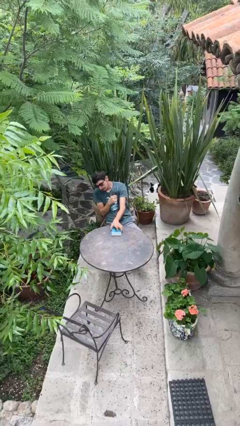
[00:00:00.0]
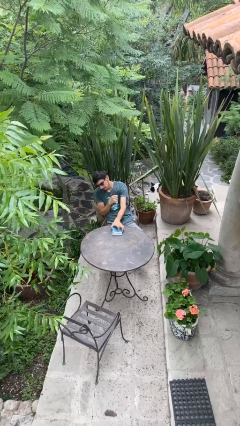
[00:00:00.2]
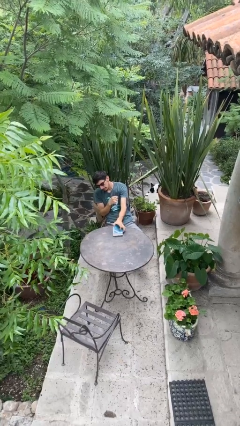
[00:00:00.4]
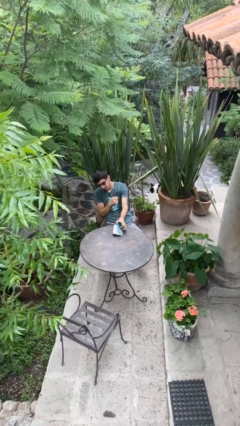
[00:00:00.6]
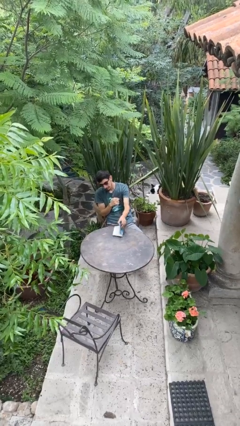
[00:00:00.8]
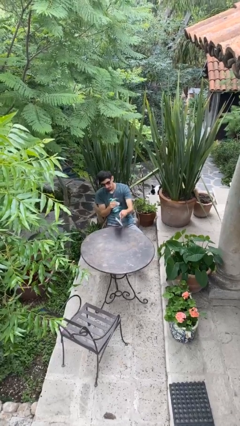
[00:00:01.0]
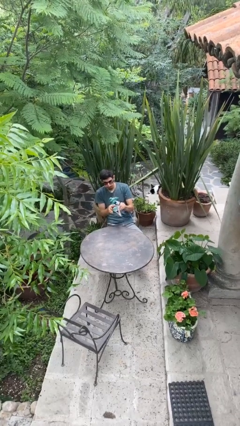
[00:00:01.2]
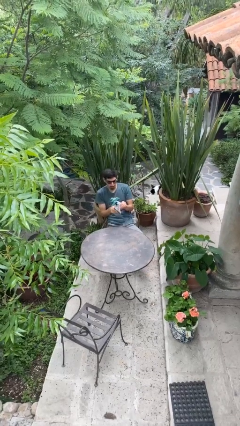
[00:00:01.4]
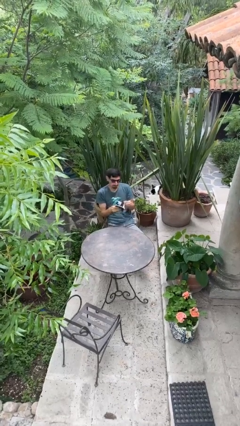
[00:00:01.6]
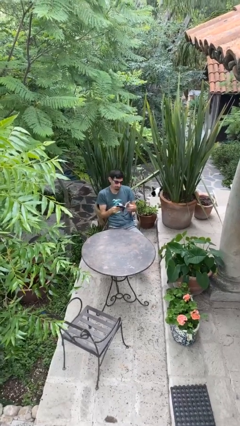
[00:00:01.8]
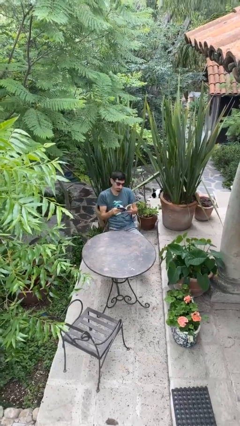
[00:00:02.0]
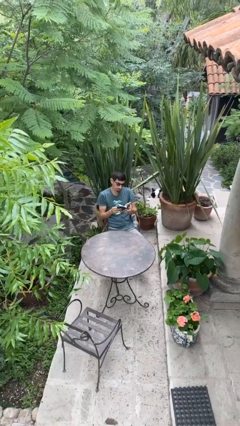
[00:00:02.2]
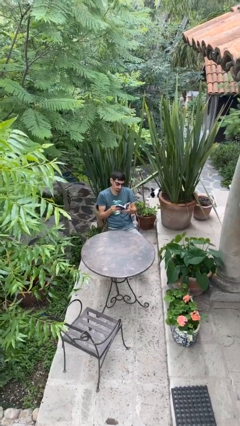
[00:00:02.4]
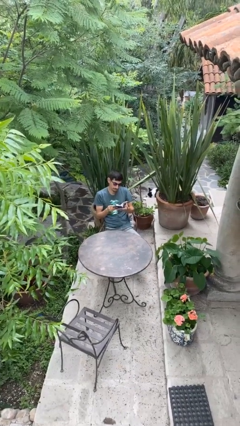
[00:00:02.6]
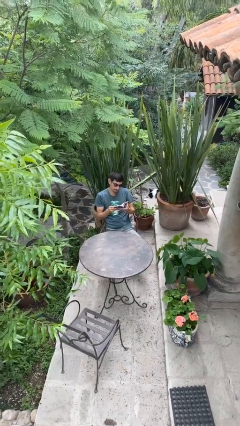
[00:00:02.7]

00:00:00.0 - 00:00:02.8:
person picks up object from table

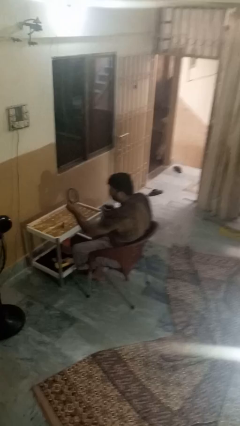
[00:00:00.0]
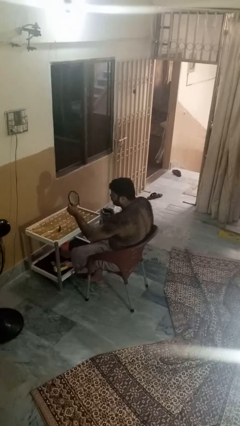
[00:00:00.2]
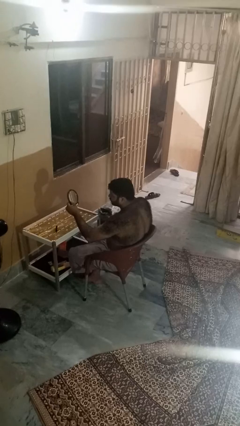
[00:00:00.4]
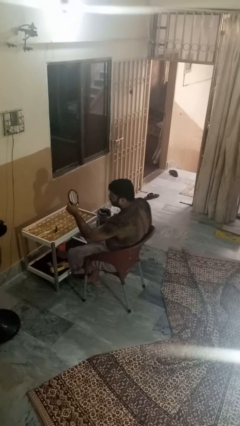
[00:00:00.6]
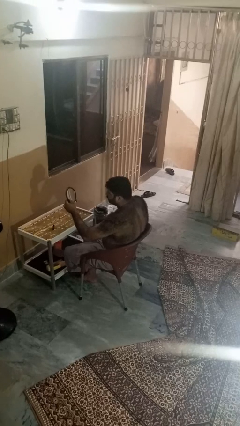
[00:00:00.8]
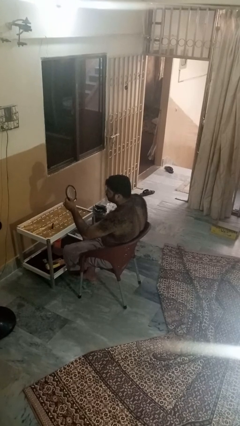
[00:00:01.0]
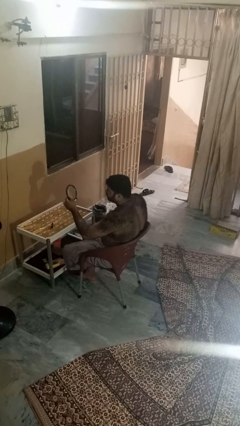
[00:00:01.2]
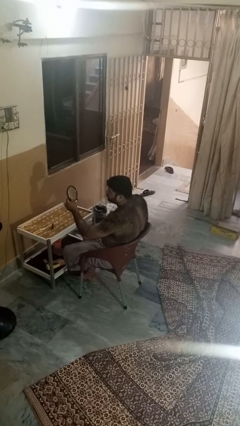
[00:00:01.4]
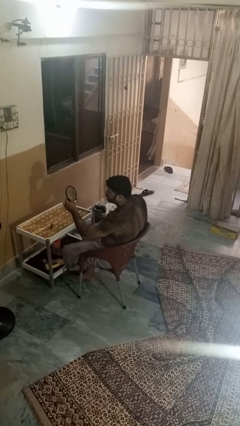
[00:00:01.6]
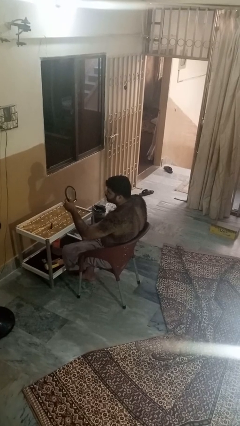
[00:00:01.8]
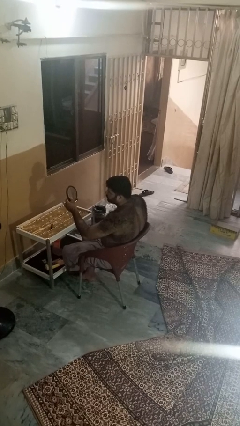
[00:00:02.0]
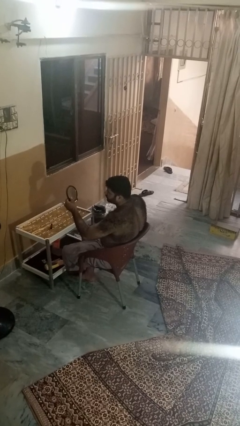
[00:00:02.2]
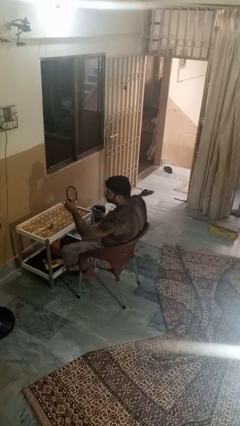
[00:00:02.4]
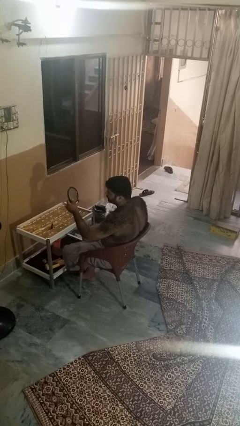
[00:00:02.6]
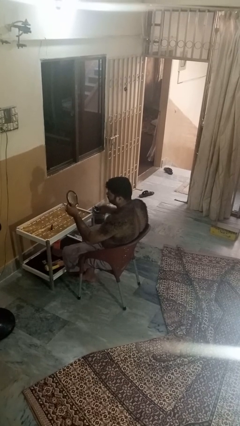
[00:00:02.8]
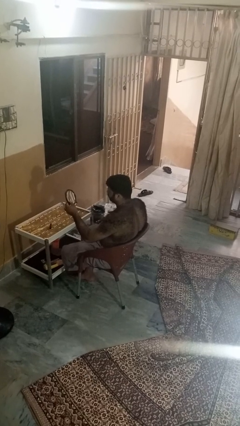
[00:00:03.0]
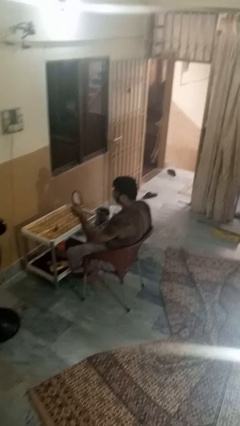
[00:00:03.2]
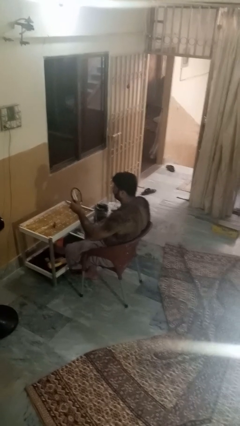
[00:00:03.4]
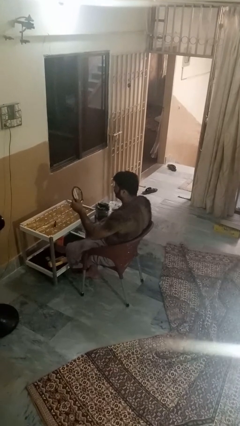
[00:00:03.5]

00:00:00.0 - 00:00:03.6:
person applies eye makeup

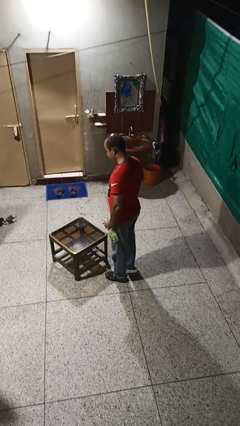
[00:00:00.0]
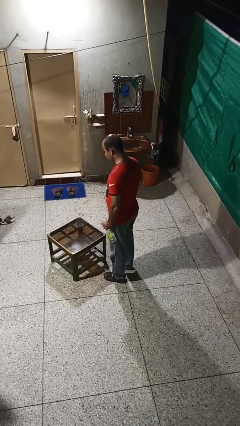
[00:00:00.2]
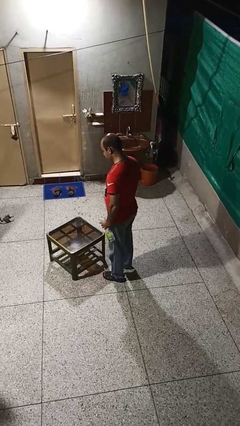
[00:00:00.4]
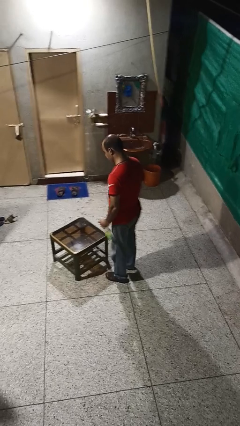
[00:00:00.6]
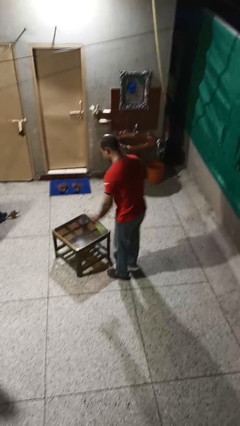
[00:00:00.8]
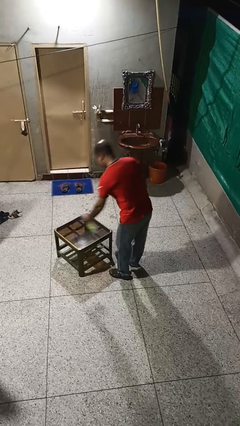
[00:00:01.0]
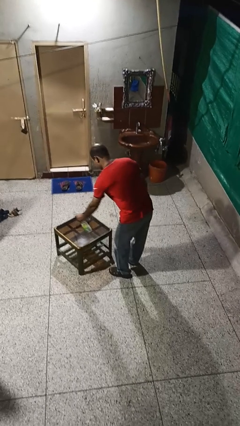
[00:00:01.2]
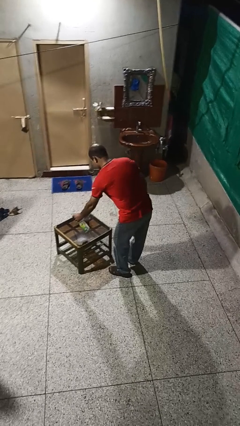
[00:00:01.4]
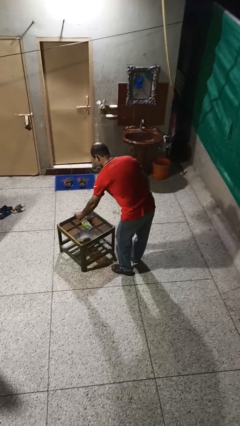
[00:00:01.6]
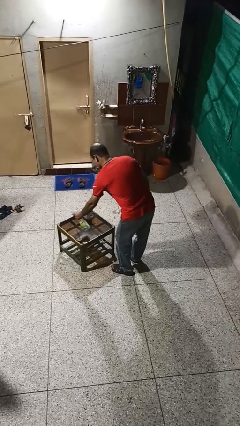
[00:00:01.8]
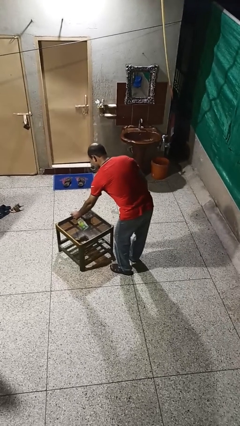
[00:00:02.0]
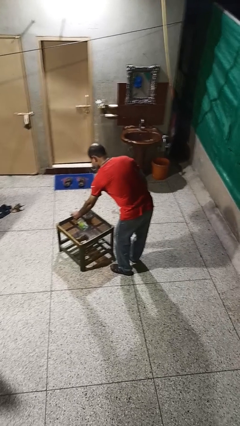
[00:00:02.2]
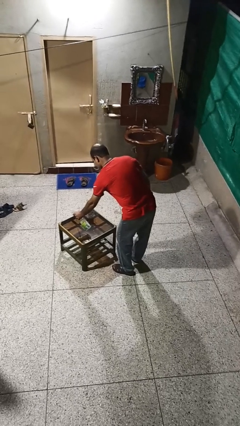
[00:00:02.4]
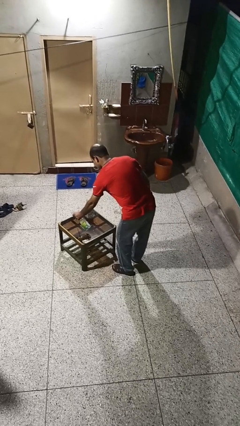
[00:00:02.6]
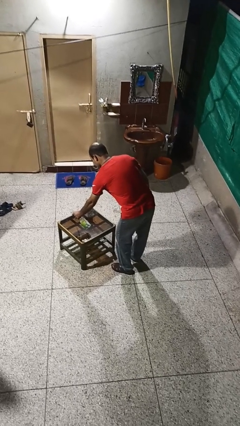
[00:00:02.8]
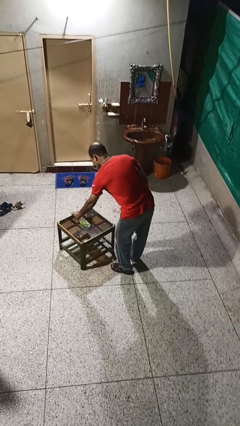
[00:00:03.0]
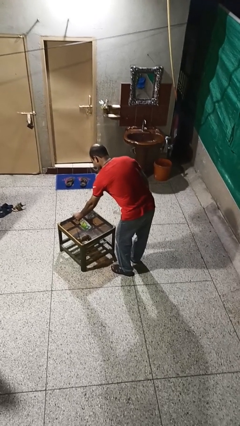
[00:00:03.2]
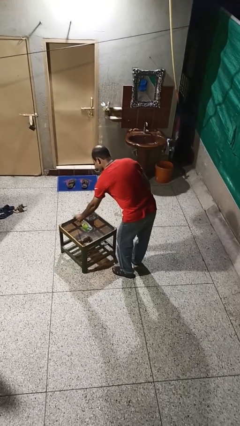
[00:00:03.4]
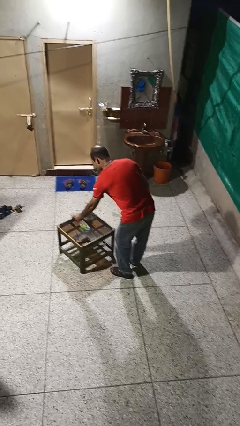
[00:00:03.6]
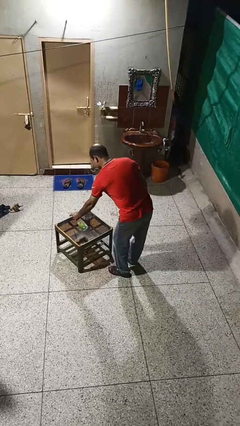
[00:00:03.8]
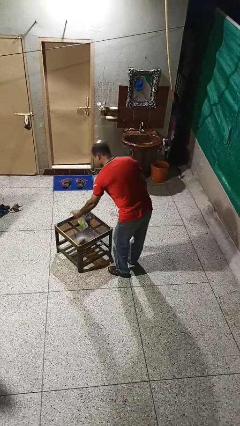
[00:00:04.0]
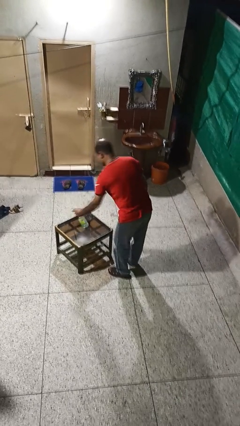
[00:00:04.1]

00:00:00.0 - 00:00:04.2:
person sprays from bottle

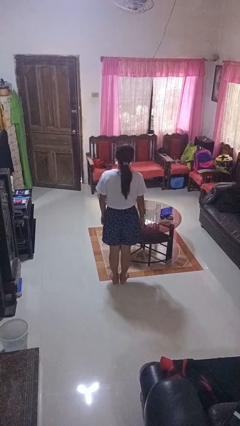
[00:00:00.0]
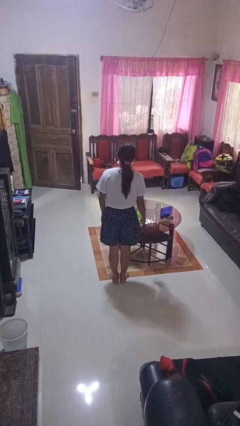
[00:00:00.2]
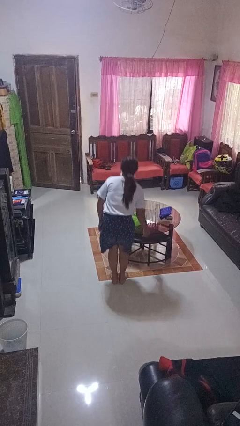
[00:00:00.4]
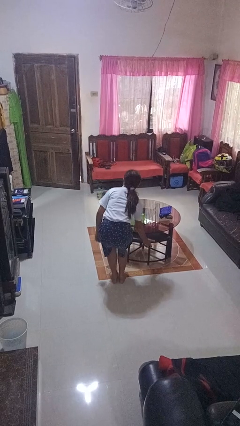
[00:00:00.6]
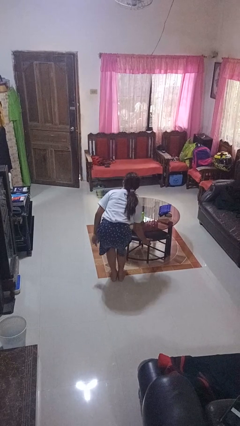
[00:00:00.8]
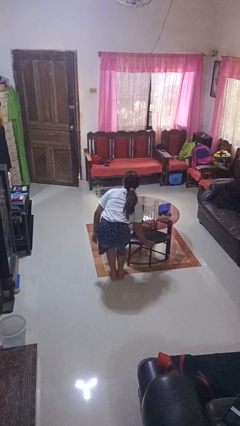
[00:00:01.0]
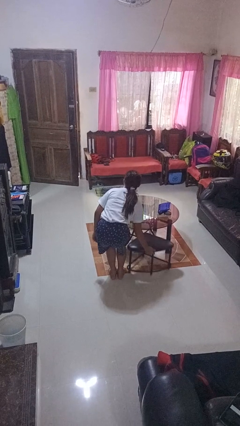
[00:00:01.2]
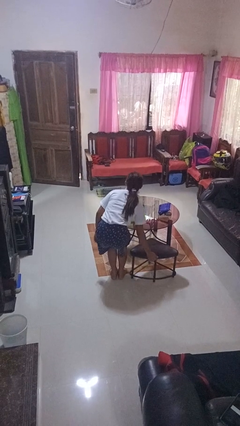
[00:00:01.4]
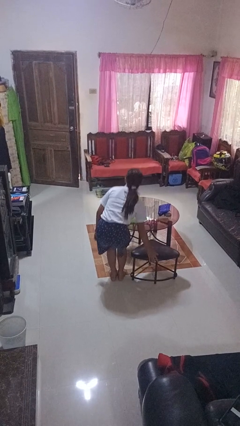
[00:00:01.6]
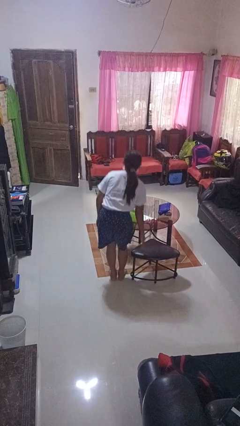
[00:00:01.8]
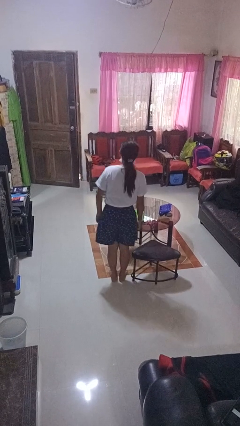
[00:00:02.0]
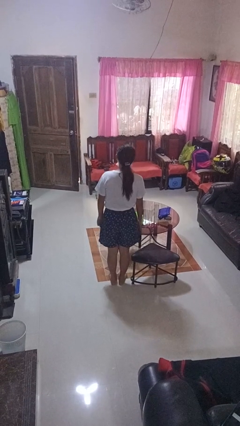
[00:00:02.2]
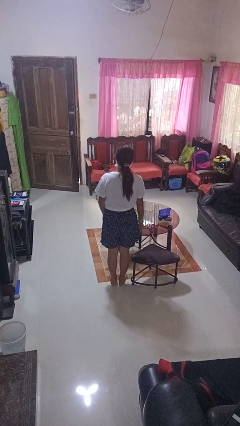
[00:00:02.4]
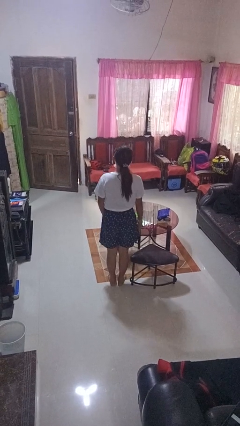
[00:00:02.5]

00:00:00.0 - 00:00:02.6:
person pulls out chair

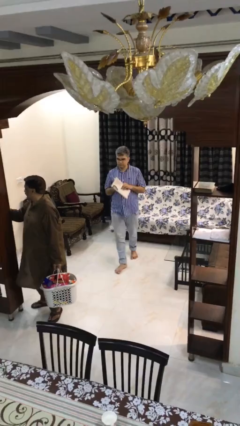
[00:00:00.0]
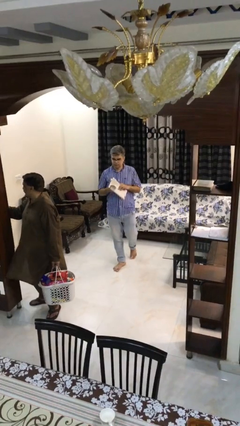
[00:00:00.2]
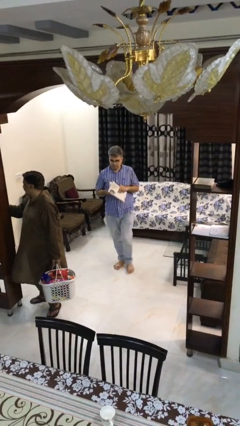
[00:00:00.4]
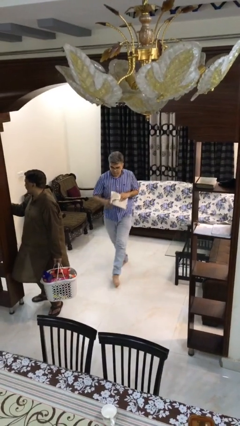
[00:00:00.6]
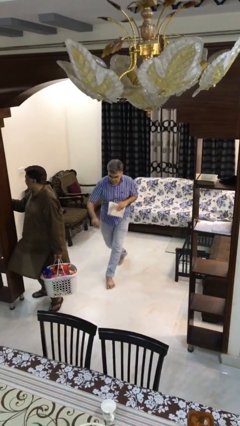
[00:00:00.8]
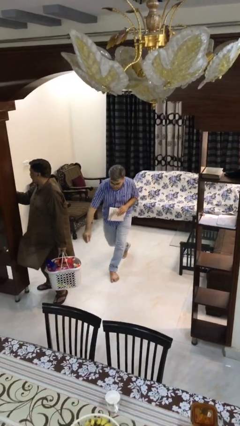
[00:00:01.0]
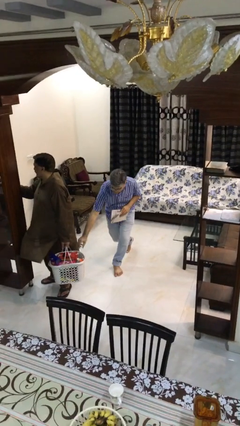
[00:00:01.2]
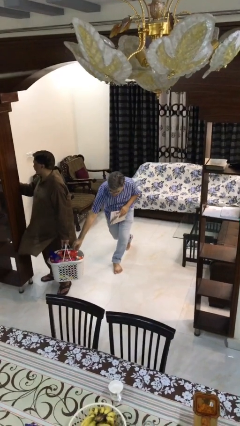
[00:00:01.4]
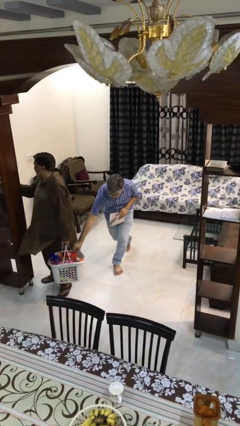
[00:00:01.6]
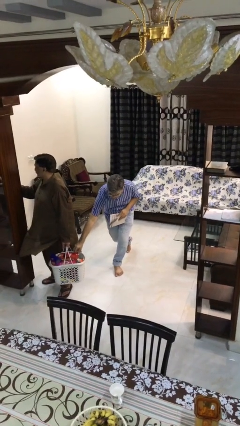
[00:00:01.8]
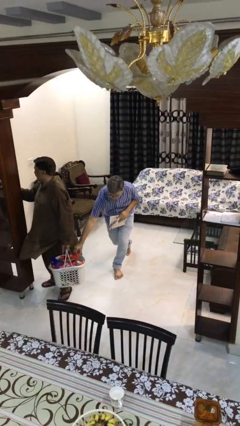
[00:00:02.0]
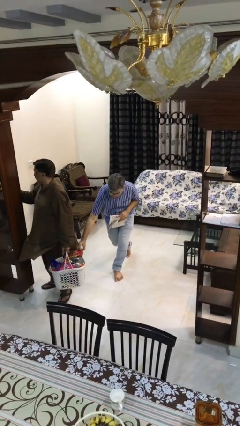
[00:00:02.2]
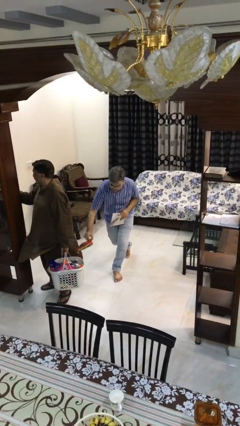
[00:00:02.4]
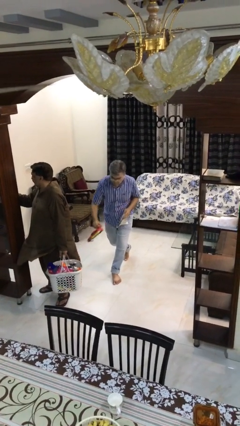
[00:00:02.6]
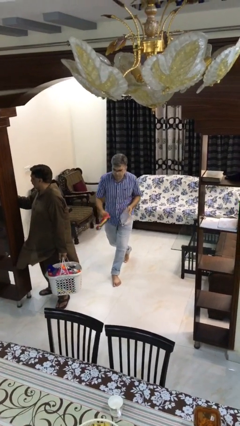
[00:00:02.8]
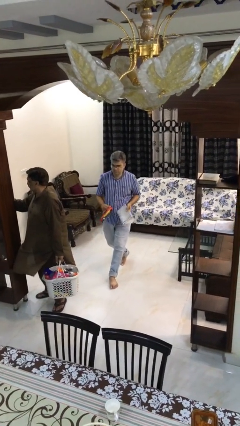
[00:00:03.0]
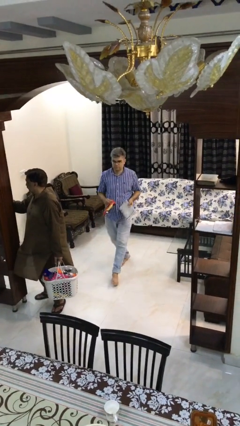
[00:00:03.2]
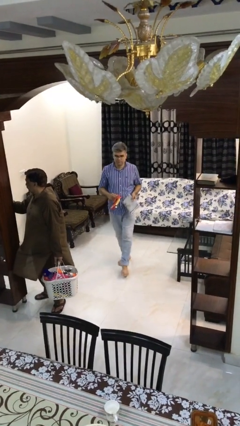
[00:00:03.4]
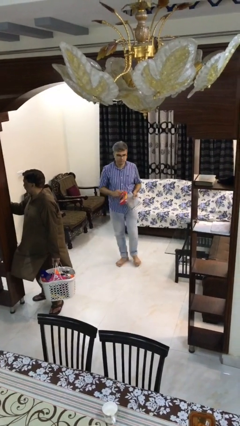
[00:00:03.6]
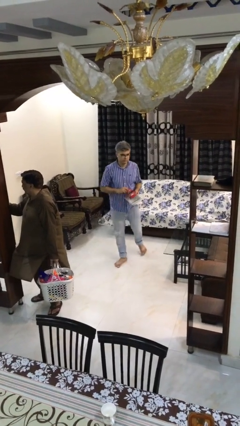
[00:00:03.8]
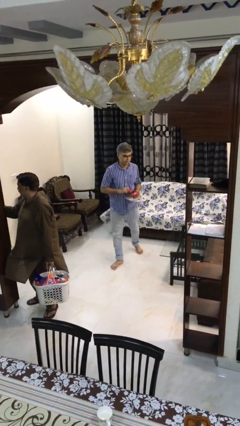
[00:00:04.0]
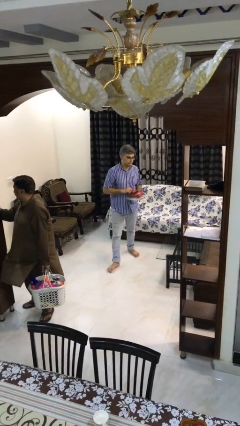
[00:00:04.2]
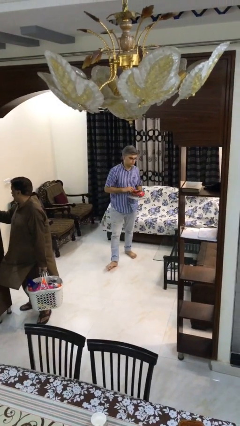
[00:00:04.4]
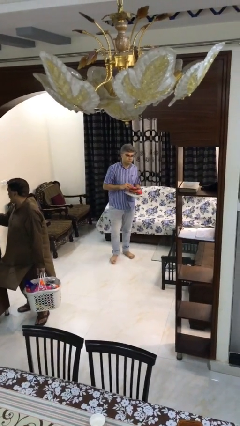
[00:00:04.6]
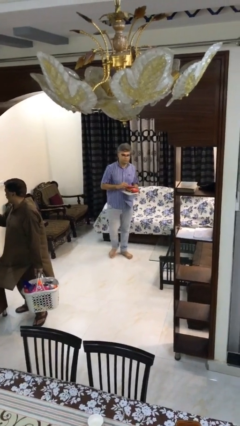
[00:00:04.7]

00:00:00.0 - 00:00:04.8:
person steals object from person
